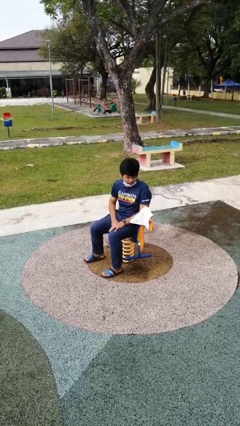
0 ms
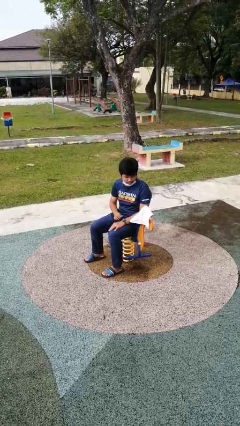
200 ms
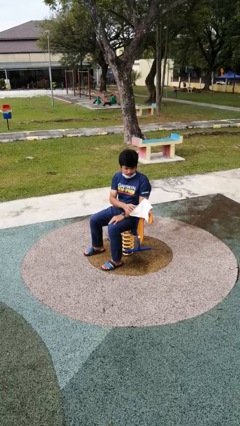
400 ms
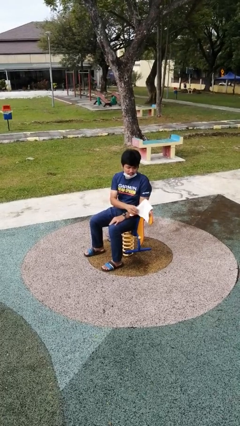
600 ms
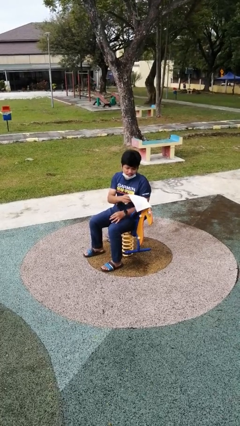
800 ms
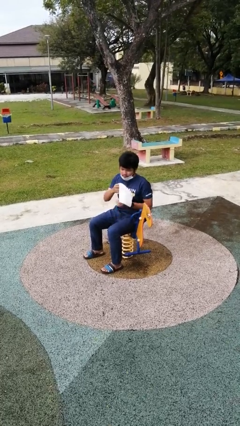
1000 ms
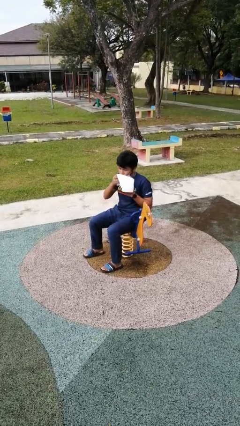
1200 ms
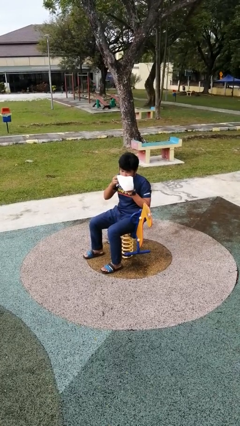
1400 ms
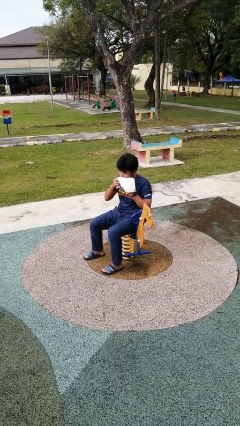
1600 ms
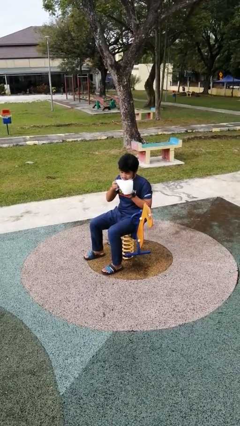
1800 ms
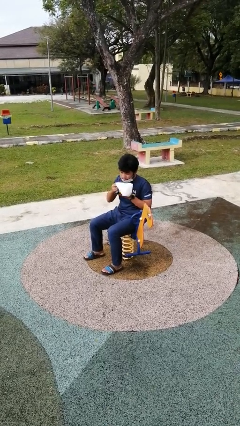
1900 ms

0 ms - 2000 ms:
person wipes mouth with napkin

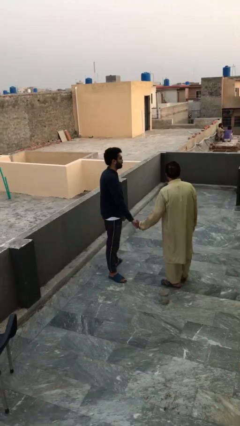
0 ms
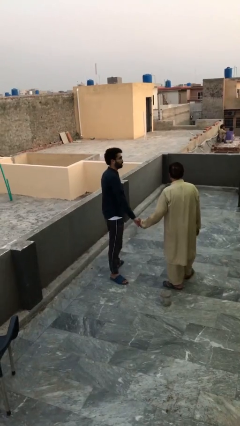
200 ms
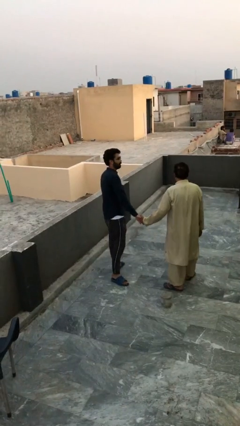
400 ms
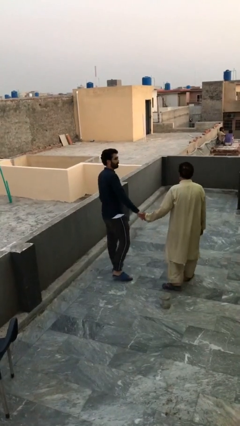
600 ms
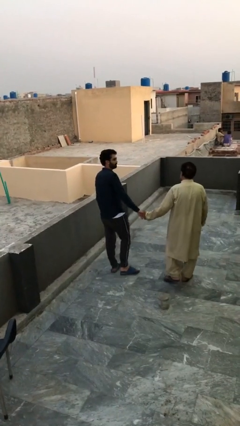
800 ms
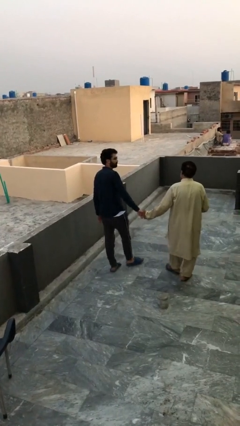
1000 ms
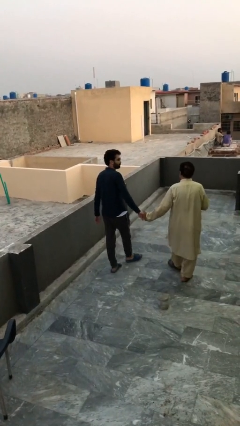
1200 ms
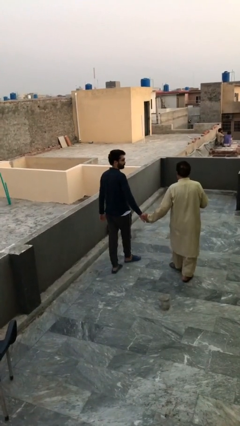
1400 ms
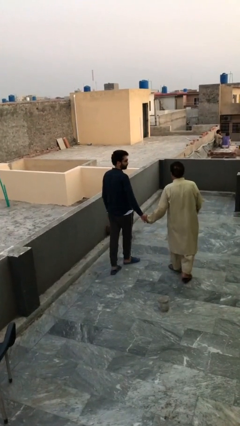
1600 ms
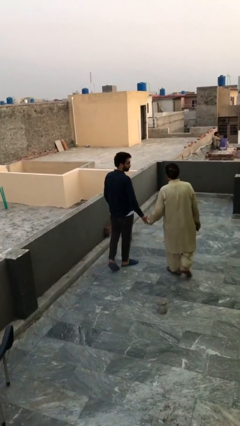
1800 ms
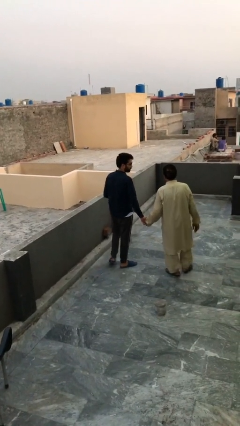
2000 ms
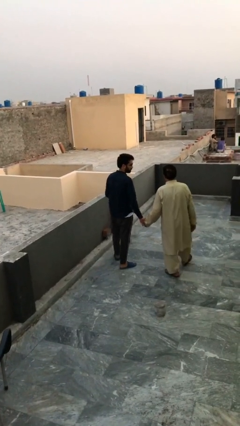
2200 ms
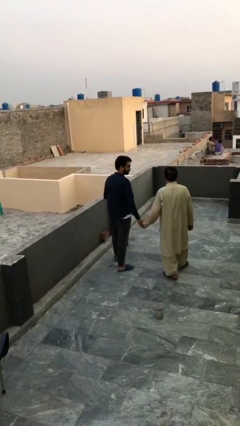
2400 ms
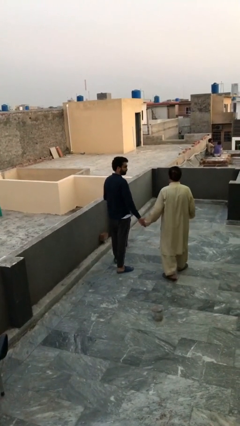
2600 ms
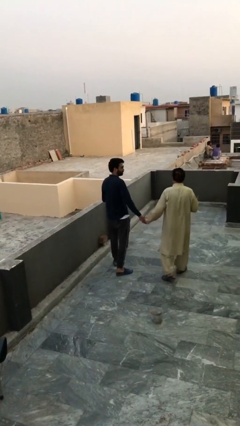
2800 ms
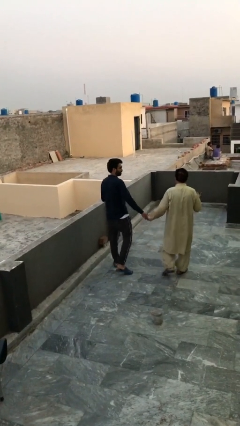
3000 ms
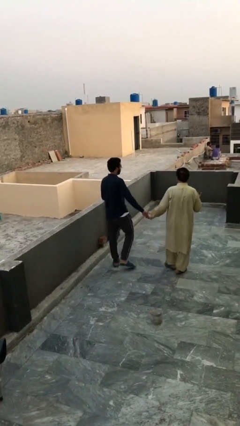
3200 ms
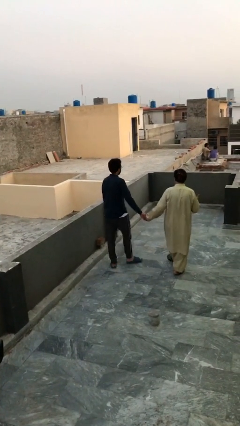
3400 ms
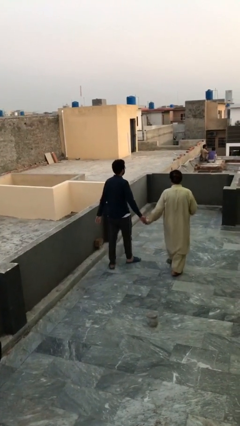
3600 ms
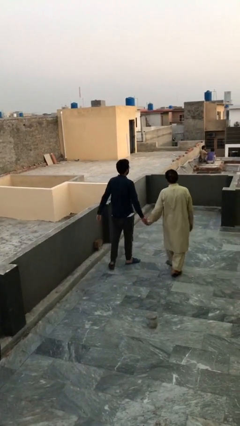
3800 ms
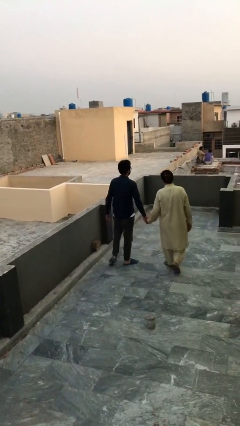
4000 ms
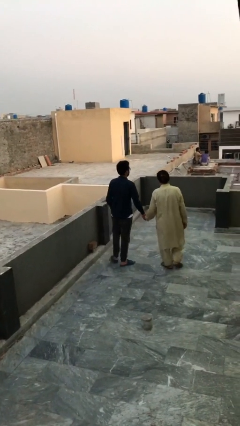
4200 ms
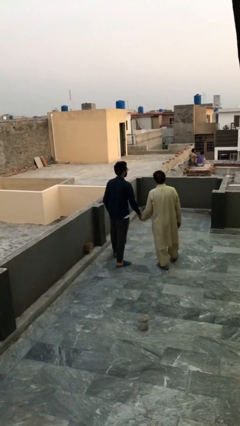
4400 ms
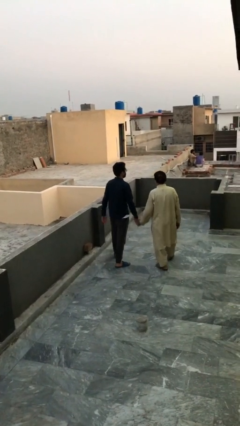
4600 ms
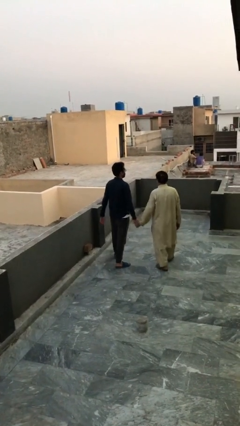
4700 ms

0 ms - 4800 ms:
person holds hand

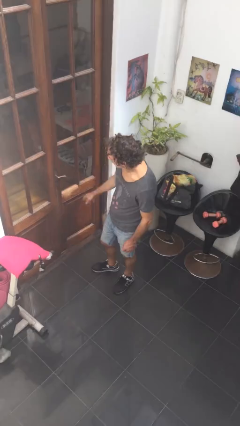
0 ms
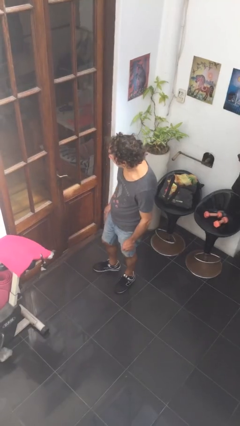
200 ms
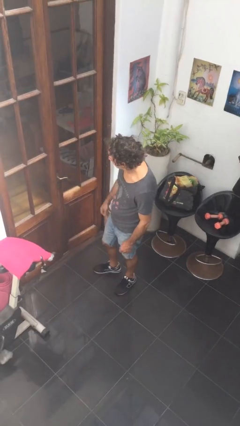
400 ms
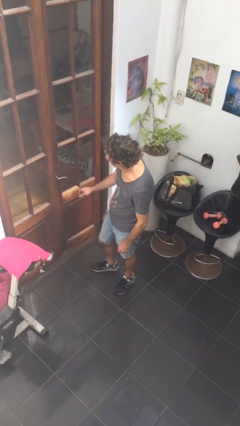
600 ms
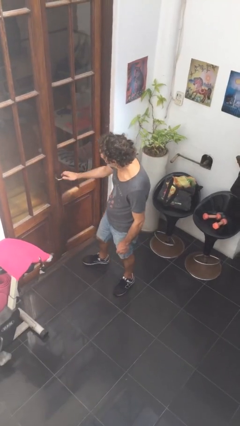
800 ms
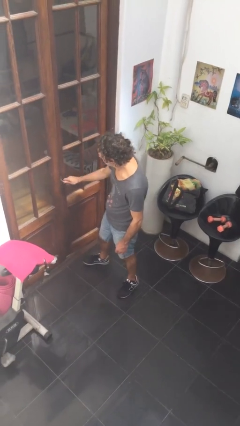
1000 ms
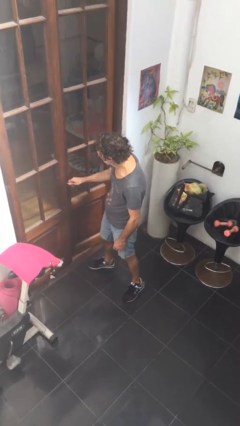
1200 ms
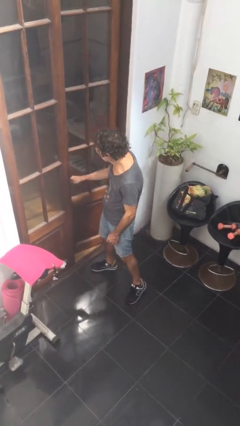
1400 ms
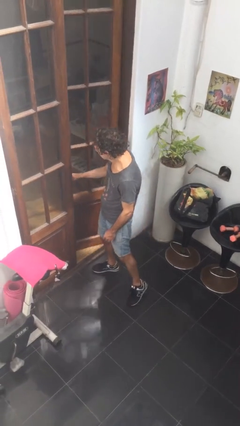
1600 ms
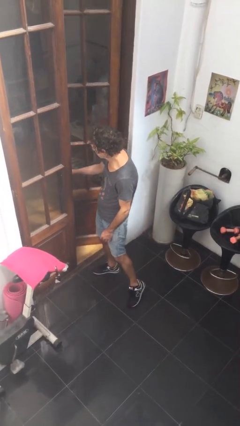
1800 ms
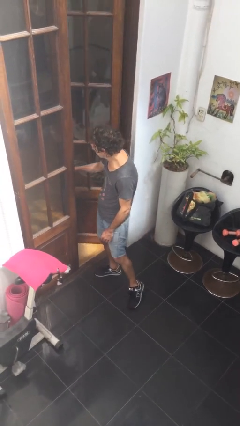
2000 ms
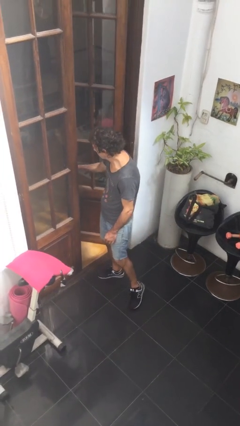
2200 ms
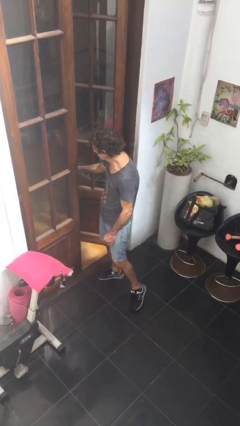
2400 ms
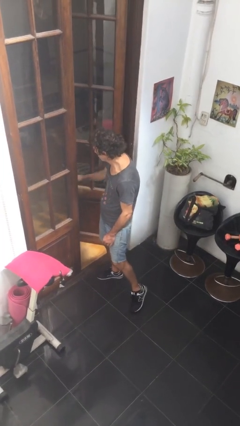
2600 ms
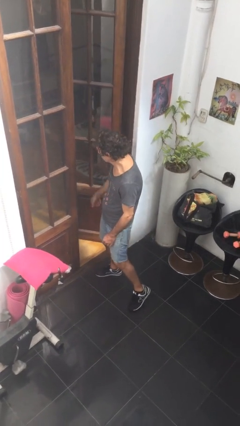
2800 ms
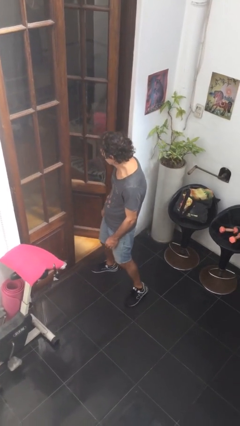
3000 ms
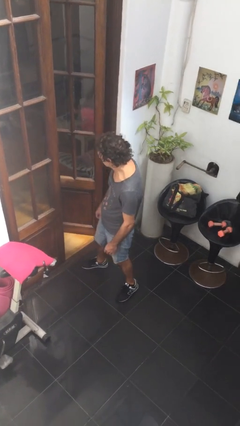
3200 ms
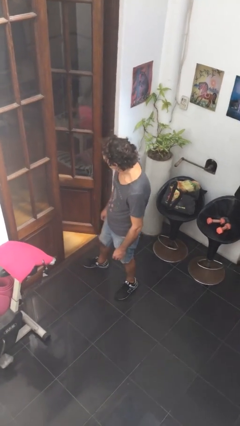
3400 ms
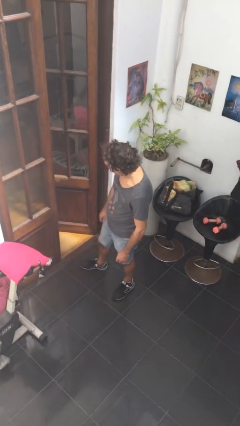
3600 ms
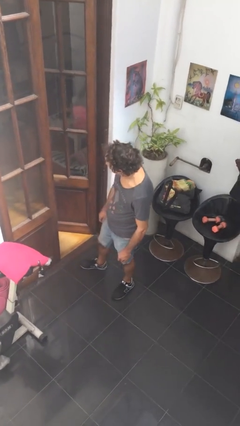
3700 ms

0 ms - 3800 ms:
person opens facility door

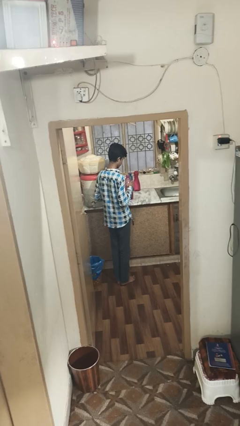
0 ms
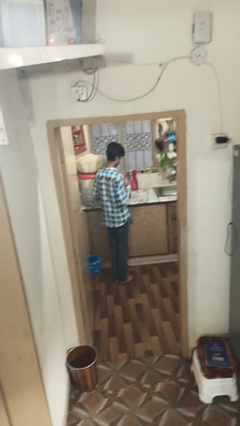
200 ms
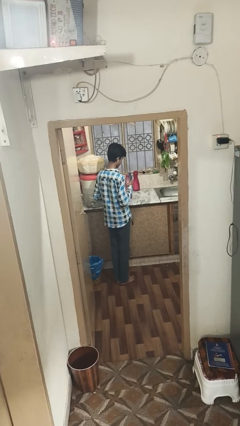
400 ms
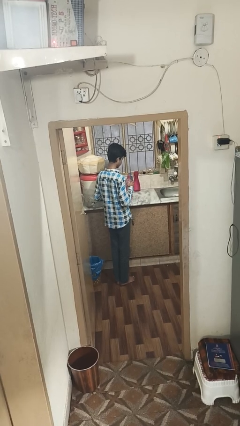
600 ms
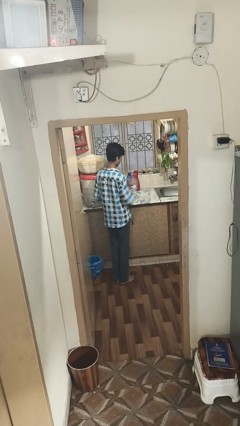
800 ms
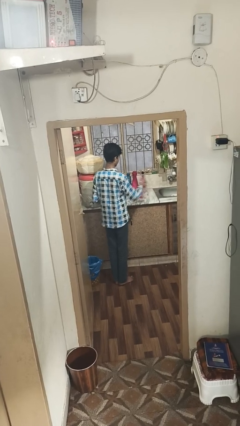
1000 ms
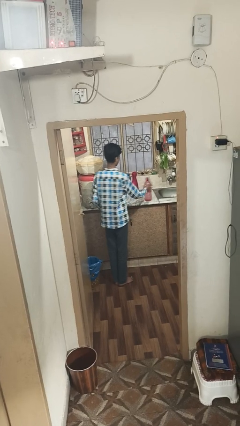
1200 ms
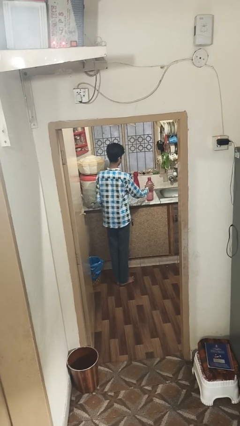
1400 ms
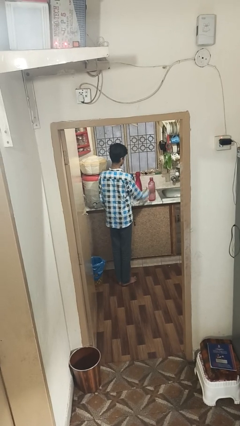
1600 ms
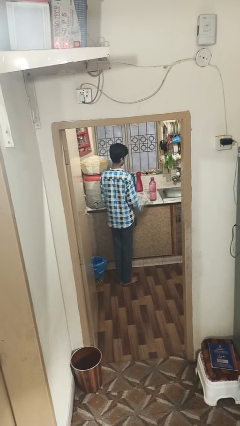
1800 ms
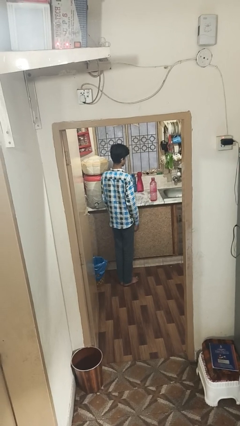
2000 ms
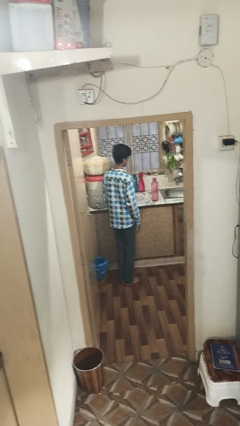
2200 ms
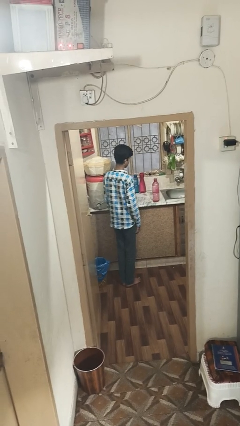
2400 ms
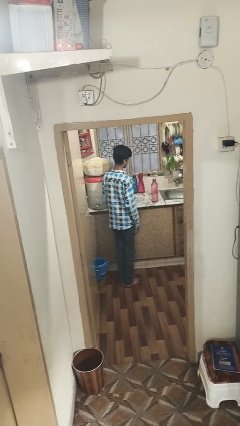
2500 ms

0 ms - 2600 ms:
person puts down object on countertop

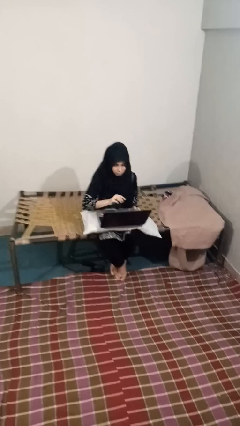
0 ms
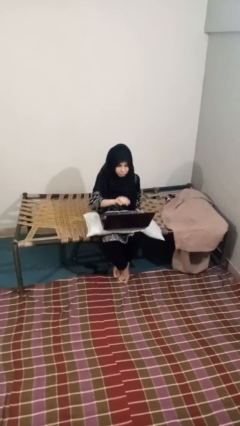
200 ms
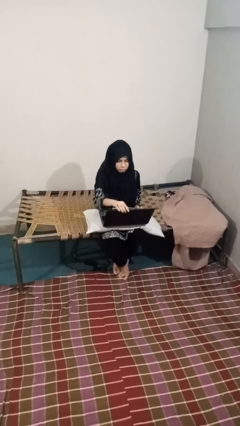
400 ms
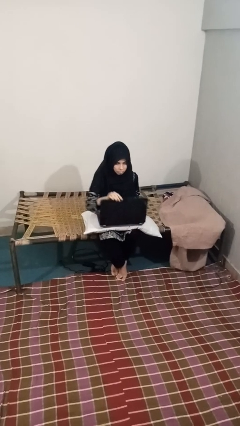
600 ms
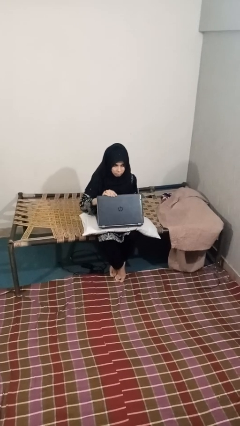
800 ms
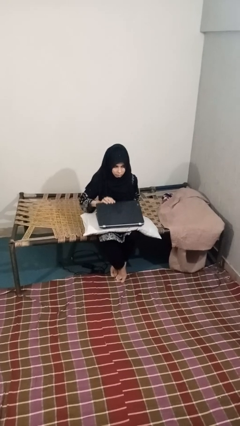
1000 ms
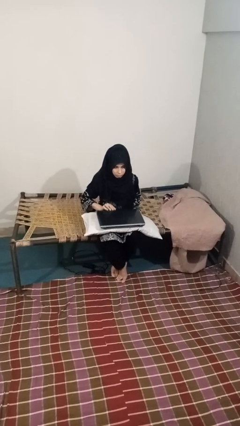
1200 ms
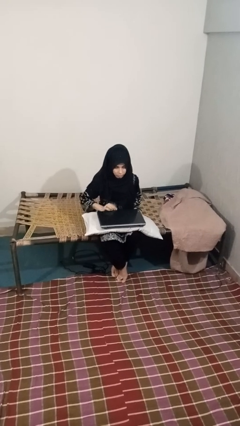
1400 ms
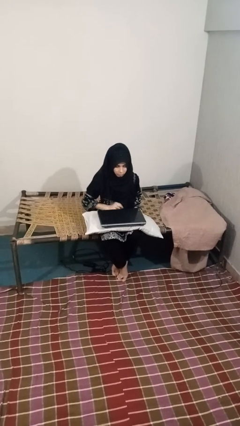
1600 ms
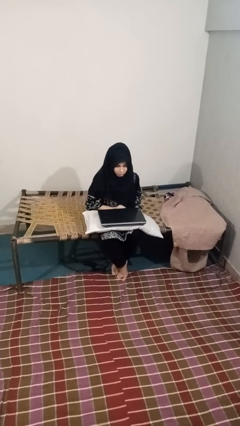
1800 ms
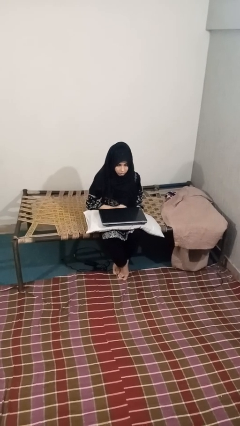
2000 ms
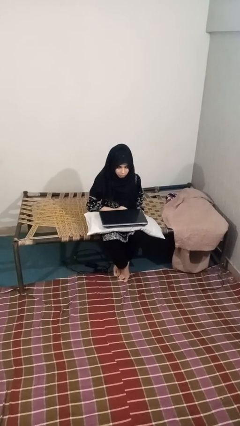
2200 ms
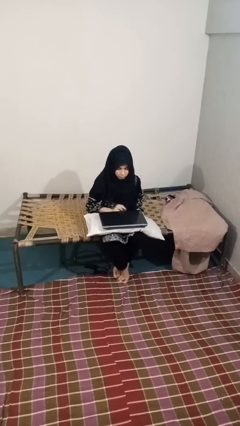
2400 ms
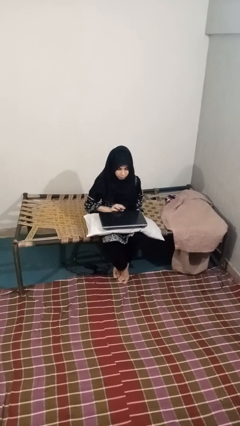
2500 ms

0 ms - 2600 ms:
person closes laptop

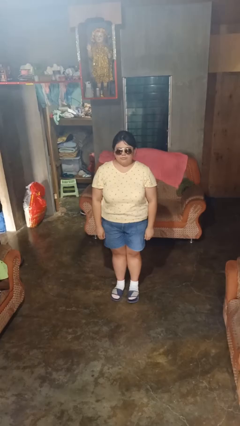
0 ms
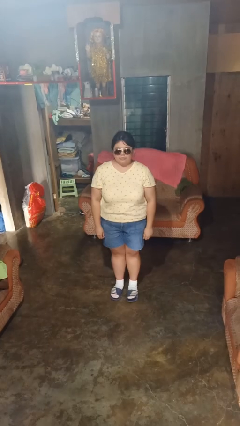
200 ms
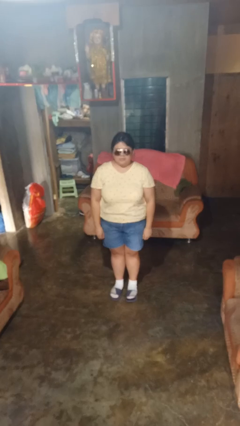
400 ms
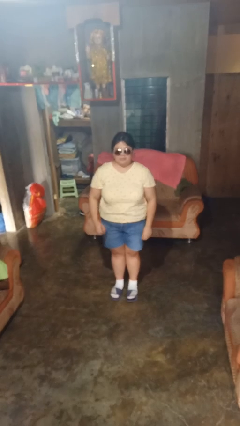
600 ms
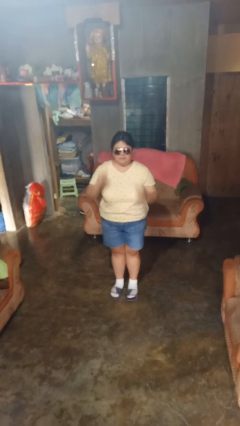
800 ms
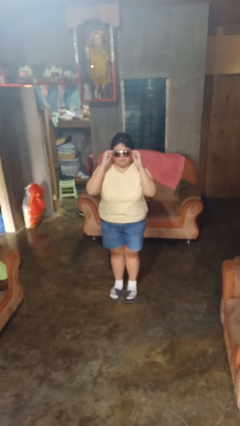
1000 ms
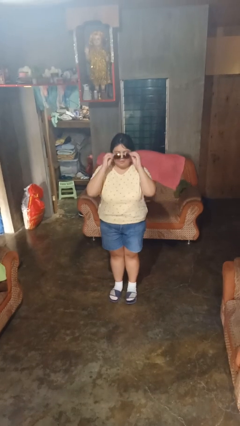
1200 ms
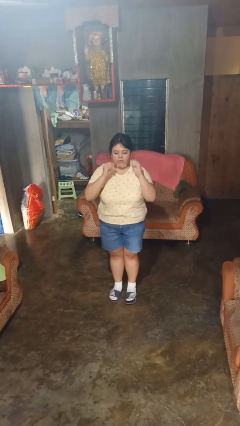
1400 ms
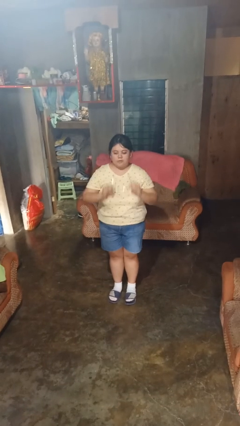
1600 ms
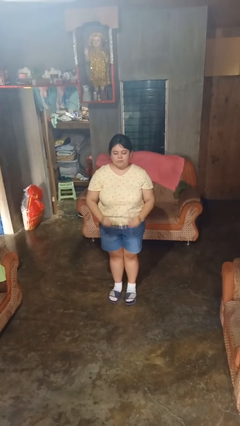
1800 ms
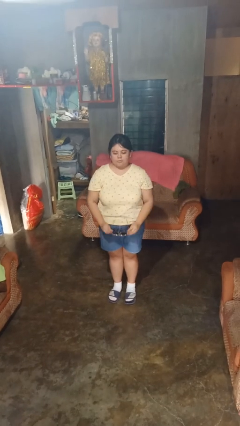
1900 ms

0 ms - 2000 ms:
person takes off sunglasses
